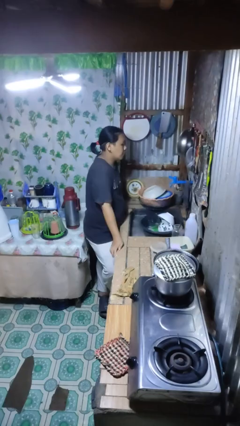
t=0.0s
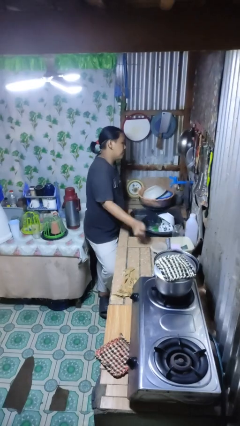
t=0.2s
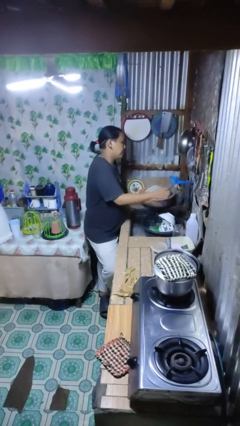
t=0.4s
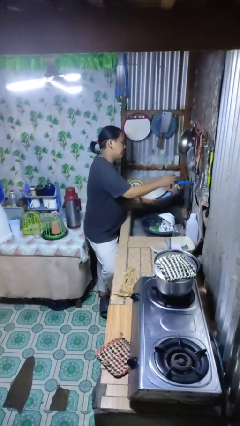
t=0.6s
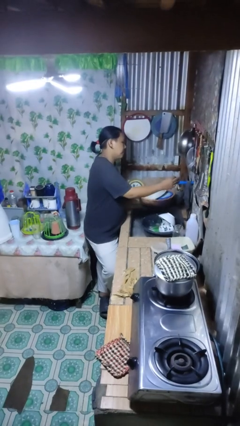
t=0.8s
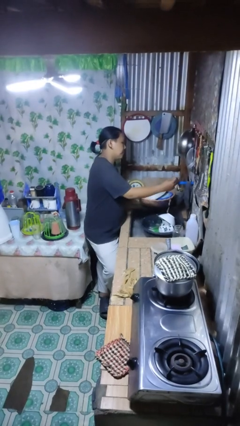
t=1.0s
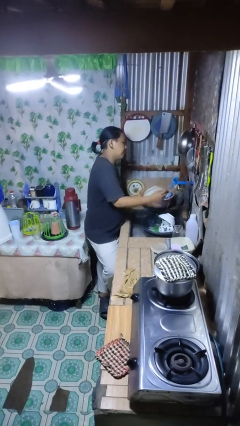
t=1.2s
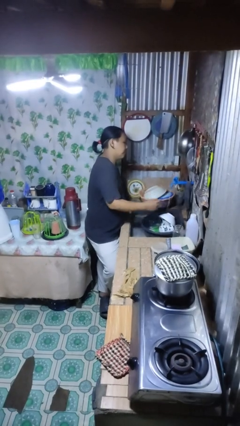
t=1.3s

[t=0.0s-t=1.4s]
person turns on faucet

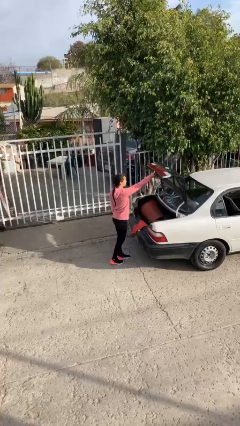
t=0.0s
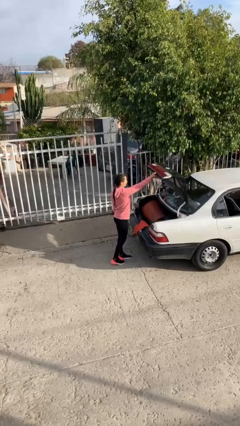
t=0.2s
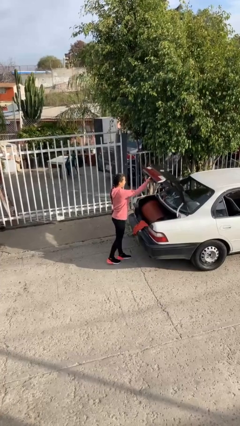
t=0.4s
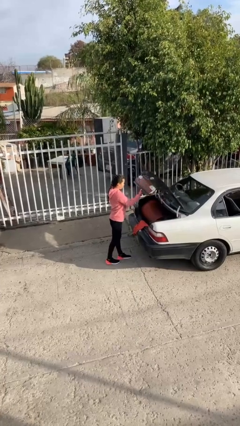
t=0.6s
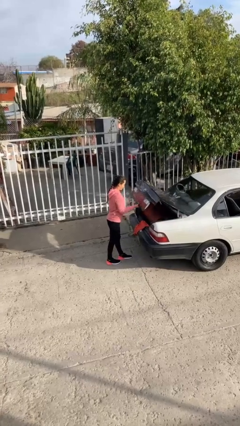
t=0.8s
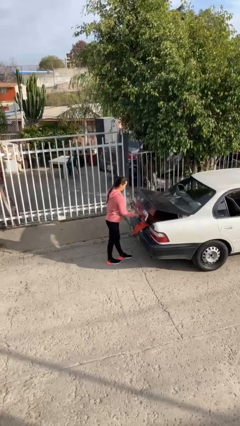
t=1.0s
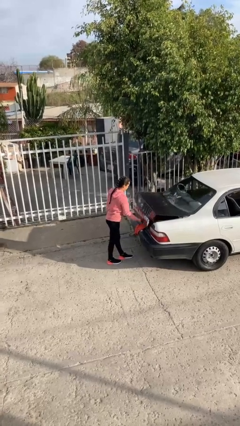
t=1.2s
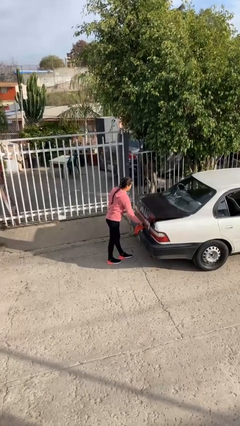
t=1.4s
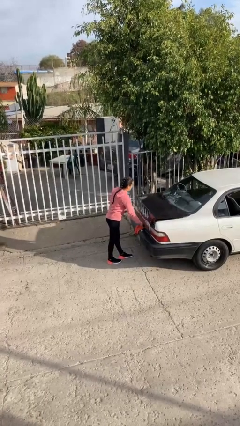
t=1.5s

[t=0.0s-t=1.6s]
person closes car trunk

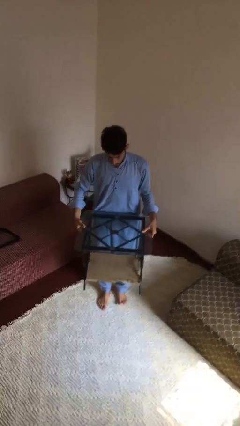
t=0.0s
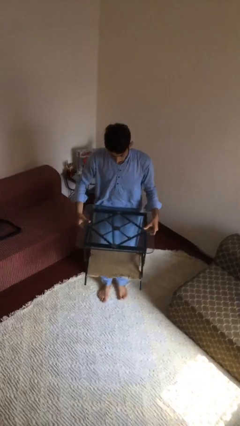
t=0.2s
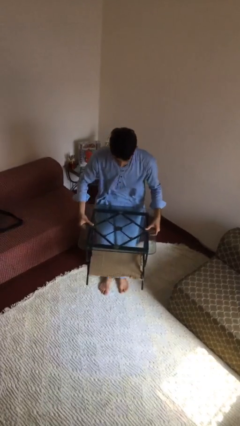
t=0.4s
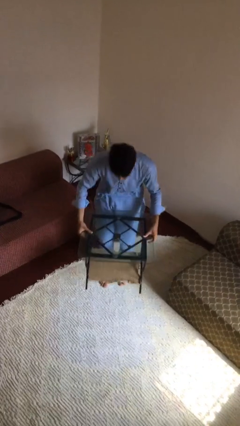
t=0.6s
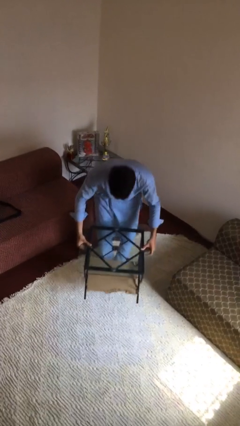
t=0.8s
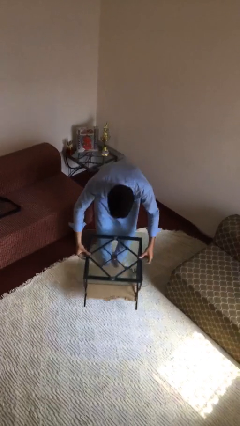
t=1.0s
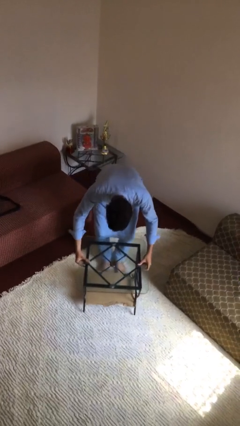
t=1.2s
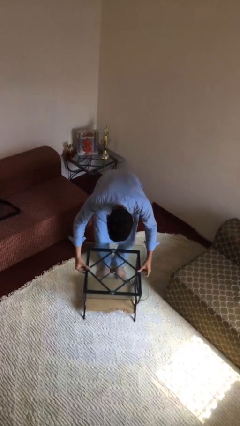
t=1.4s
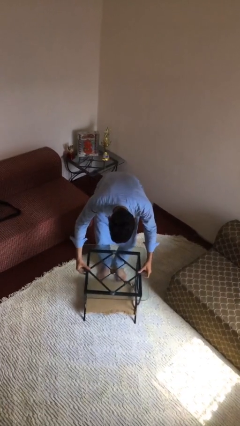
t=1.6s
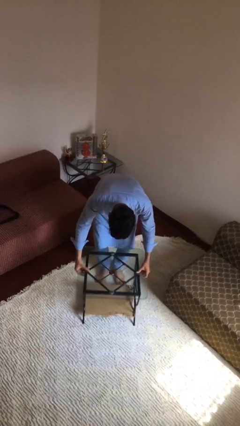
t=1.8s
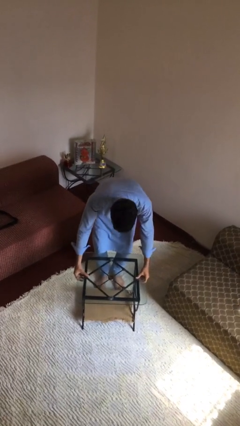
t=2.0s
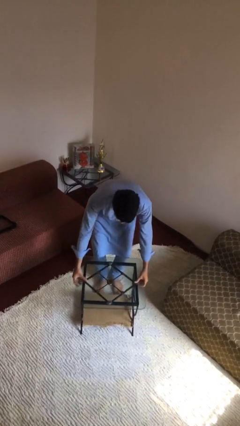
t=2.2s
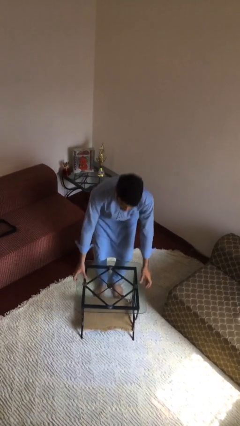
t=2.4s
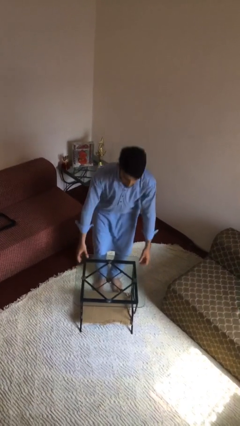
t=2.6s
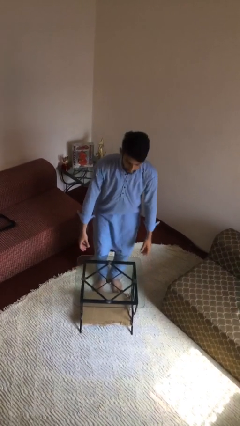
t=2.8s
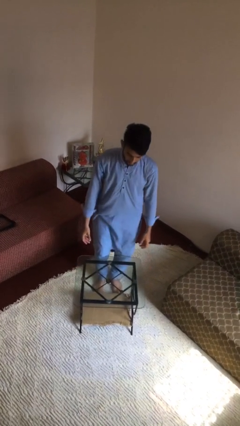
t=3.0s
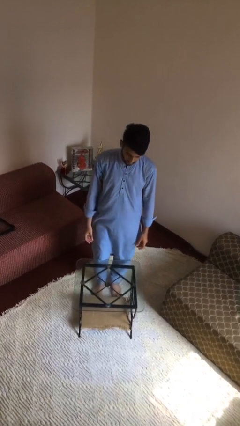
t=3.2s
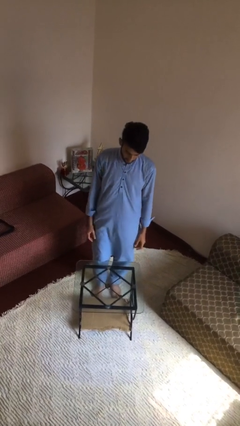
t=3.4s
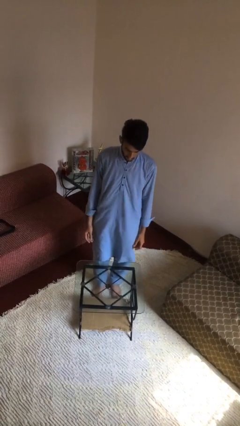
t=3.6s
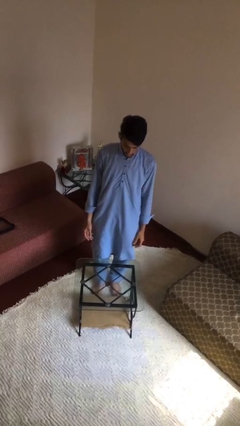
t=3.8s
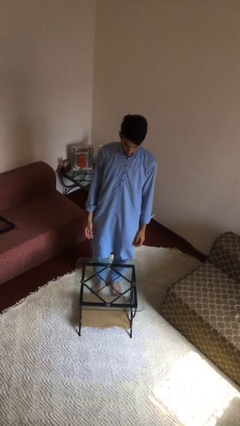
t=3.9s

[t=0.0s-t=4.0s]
person puts down object on floor

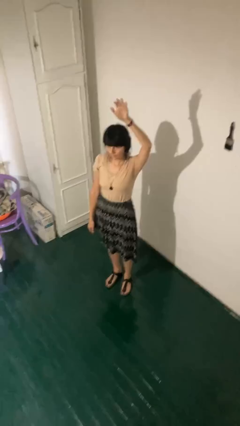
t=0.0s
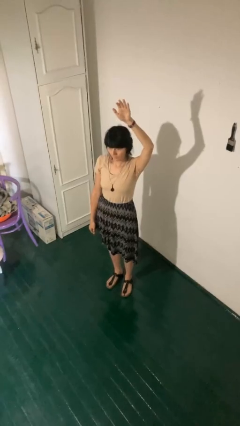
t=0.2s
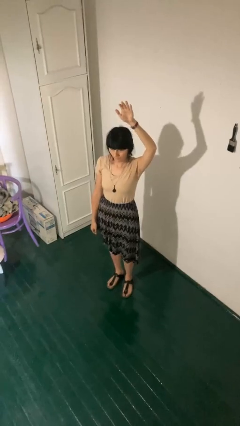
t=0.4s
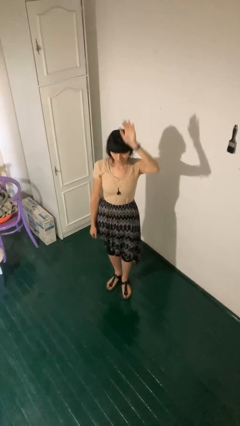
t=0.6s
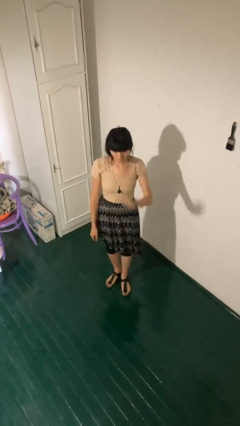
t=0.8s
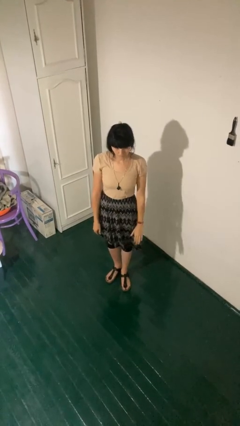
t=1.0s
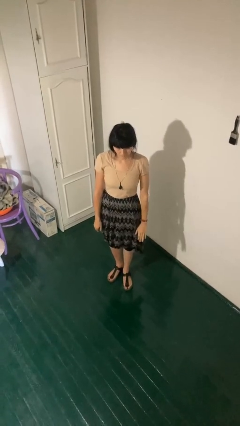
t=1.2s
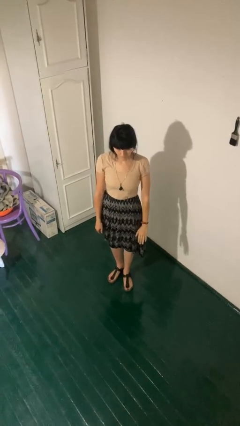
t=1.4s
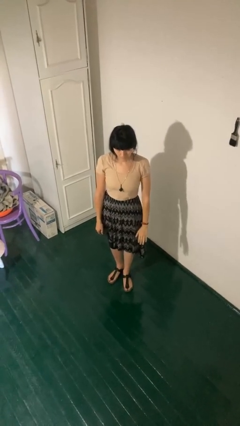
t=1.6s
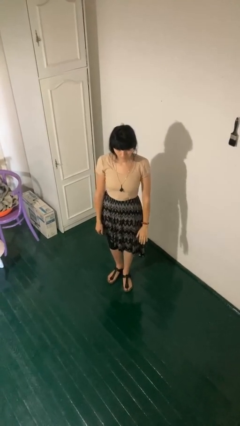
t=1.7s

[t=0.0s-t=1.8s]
person gestures swipe down

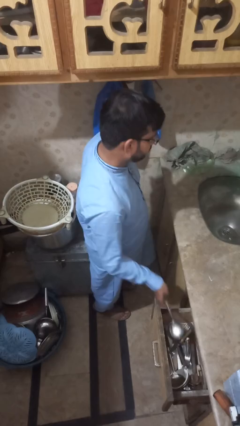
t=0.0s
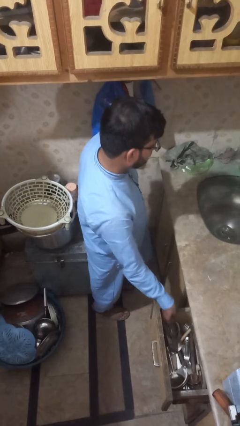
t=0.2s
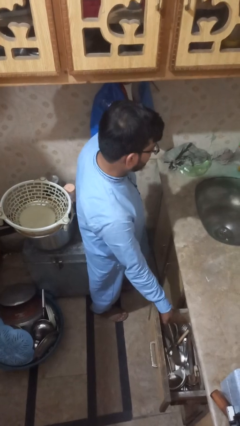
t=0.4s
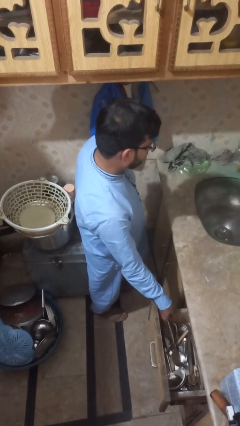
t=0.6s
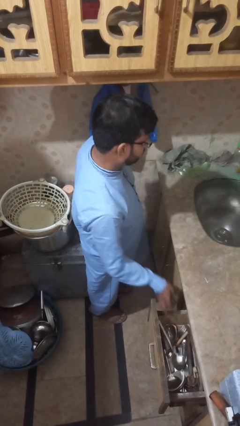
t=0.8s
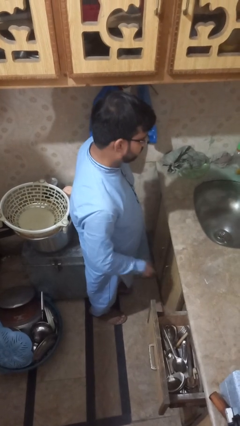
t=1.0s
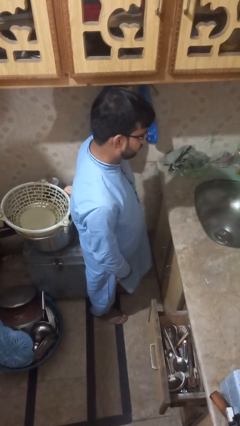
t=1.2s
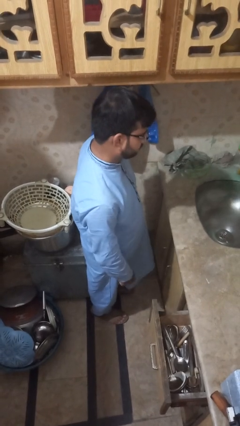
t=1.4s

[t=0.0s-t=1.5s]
person puts object into kitchen drawer

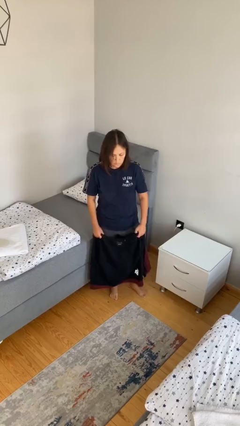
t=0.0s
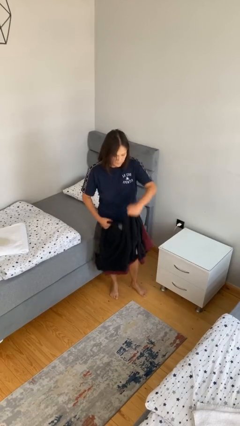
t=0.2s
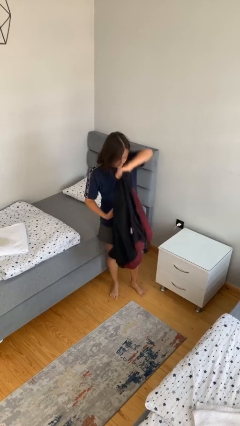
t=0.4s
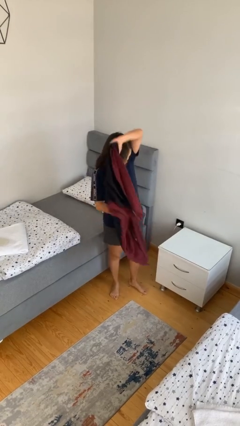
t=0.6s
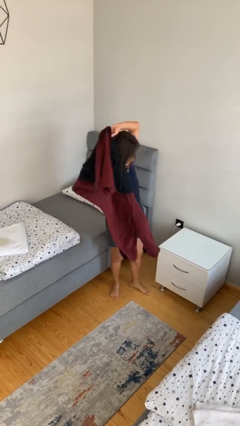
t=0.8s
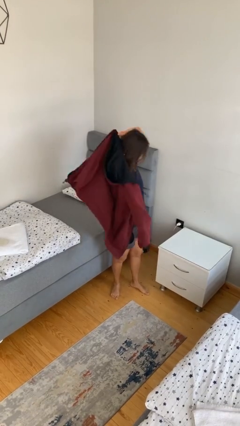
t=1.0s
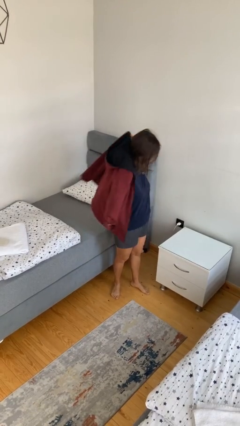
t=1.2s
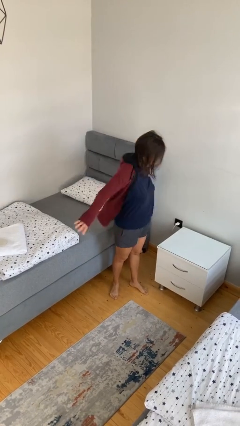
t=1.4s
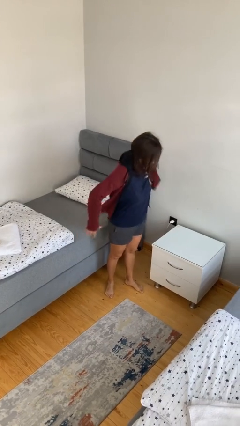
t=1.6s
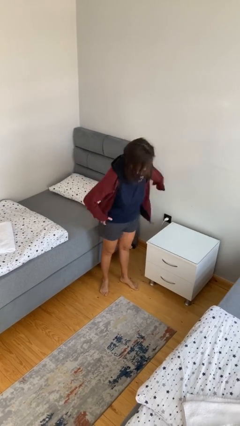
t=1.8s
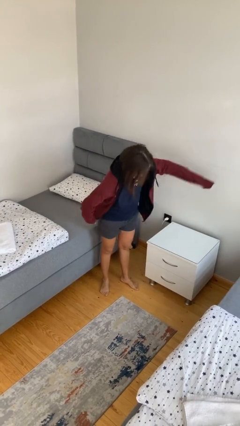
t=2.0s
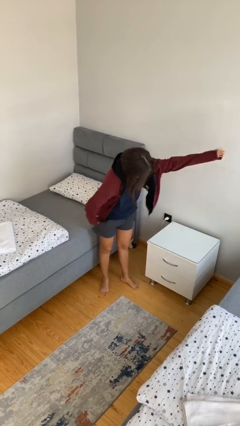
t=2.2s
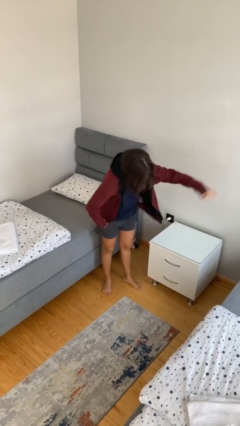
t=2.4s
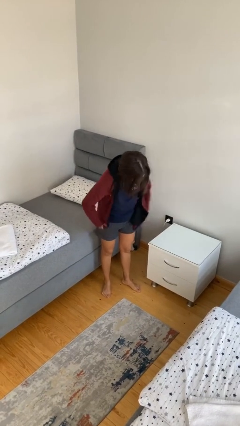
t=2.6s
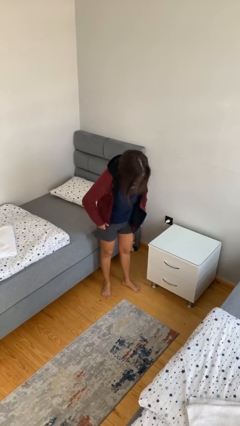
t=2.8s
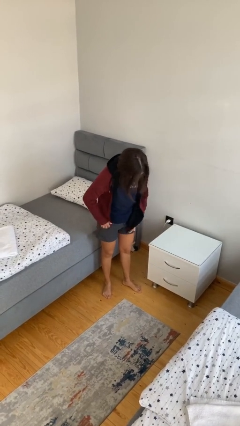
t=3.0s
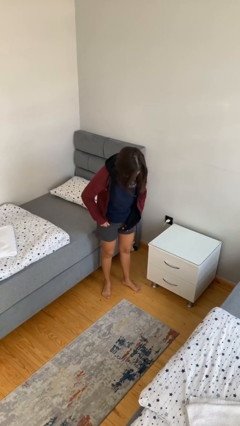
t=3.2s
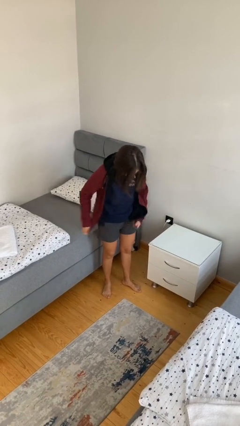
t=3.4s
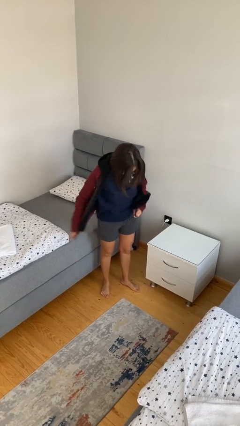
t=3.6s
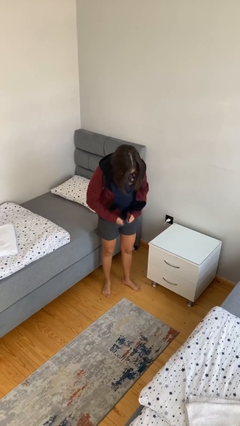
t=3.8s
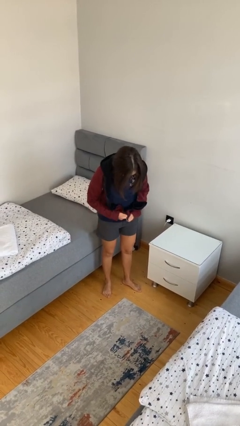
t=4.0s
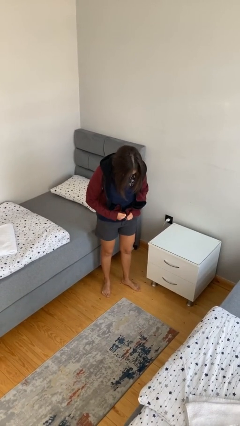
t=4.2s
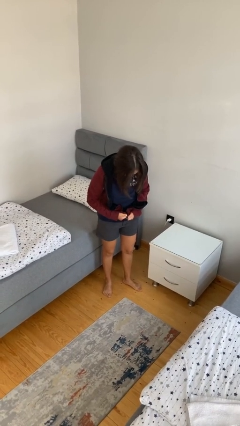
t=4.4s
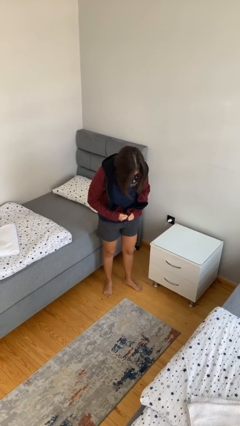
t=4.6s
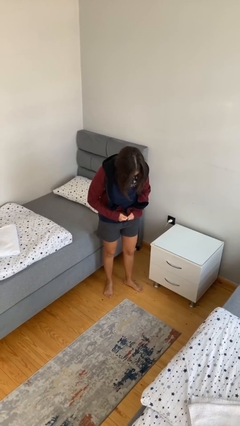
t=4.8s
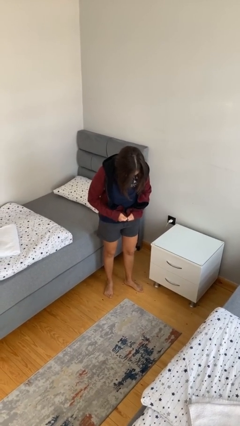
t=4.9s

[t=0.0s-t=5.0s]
person puts on jacket

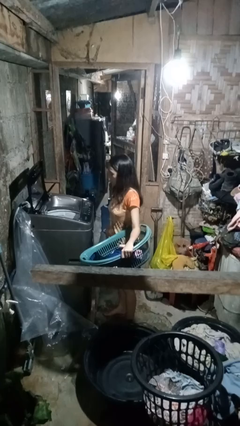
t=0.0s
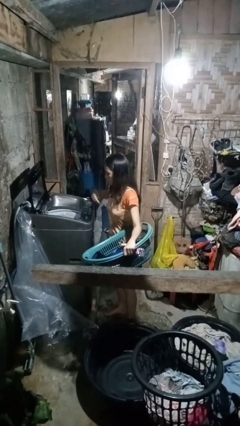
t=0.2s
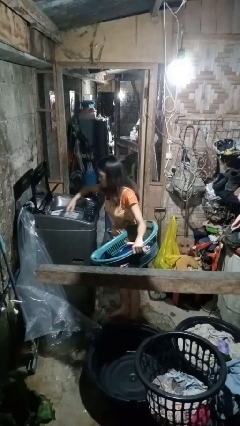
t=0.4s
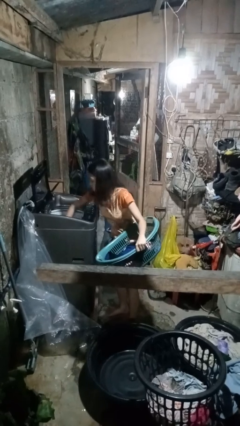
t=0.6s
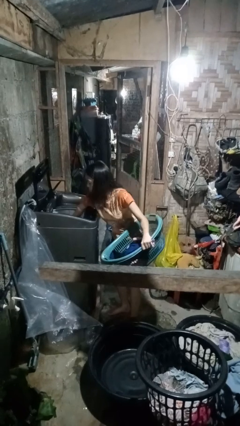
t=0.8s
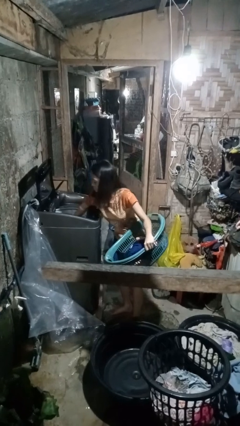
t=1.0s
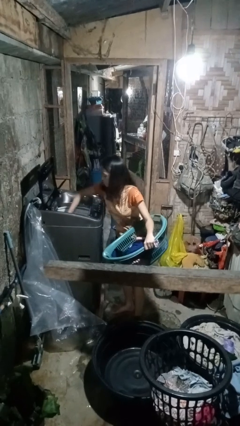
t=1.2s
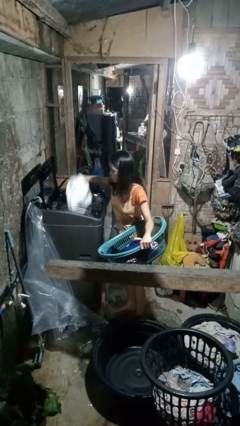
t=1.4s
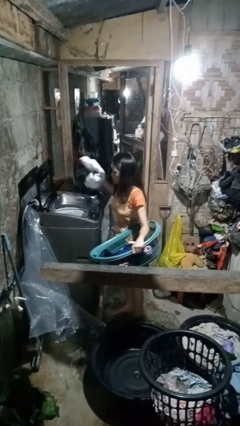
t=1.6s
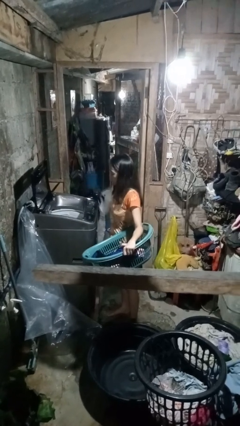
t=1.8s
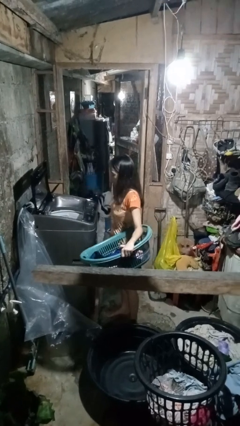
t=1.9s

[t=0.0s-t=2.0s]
person loads clotheswasher
